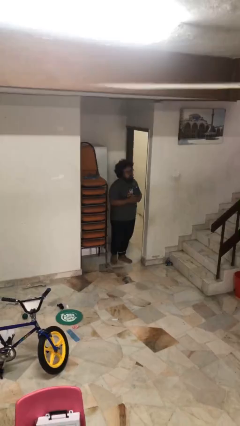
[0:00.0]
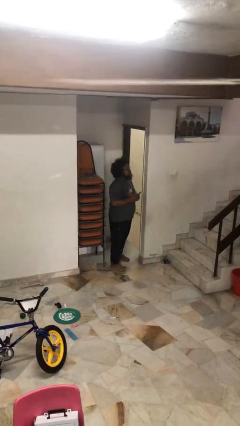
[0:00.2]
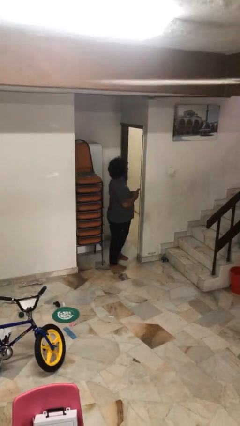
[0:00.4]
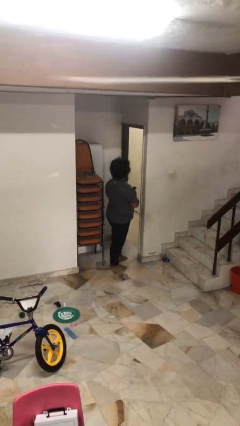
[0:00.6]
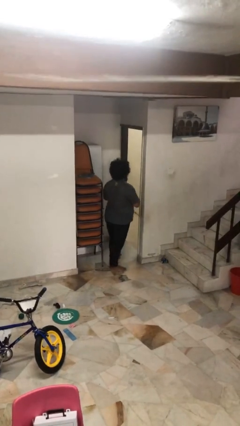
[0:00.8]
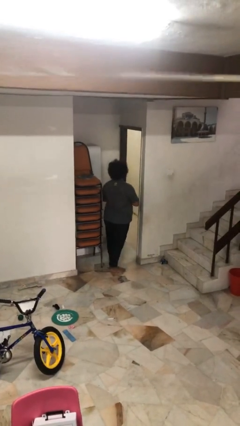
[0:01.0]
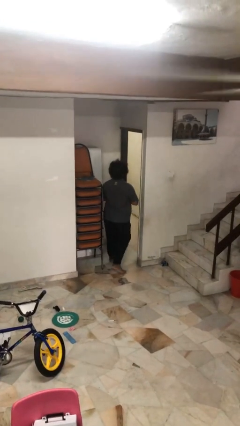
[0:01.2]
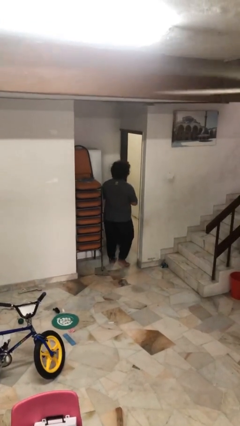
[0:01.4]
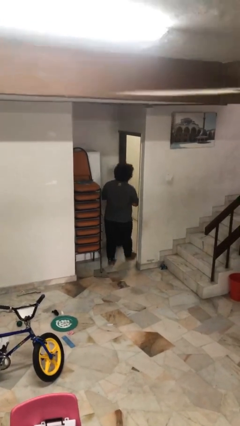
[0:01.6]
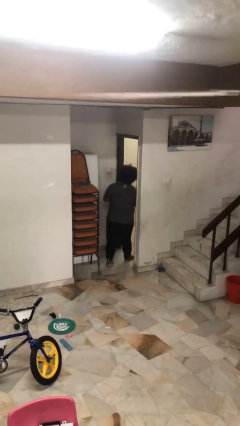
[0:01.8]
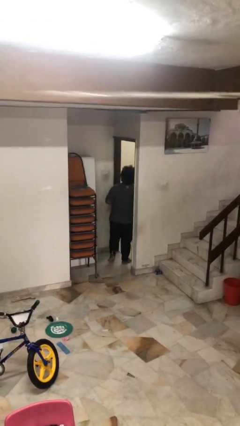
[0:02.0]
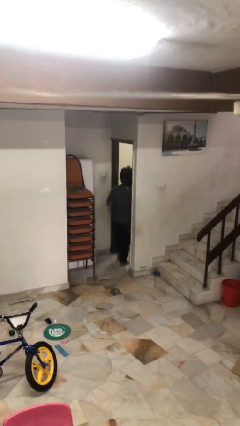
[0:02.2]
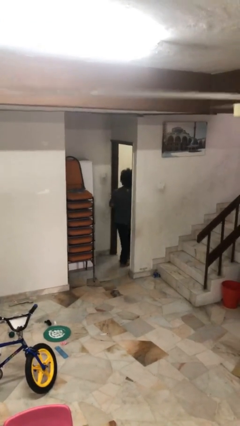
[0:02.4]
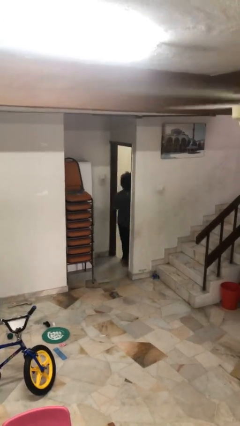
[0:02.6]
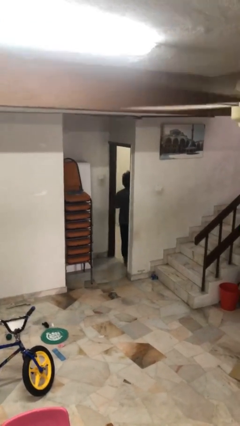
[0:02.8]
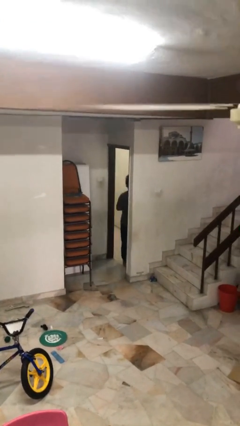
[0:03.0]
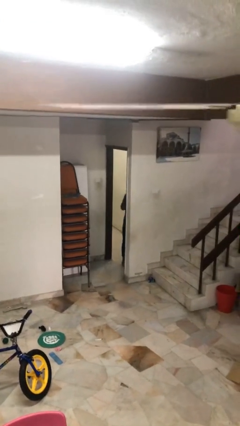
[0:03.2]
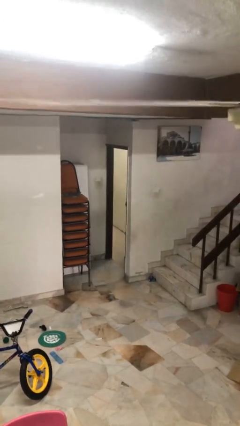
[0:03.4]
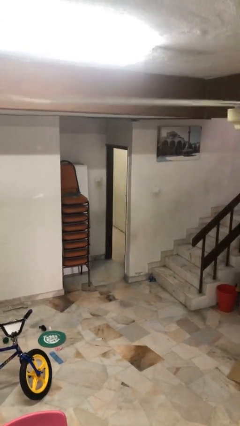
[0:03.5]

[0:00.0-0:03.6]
person exits scene through structure

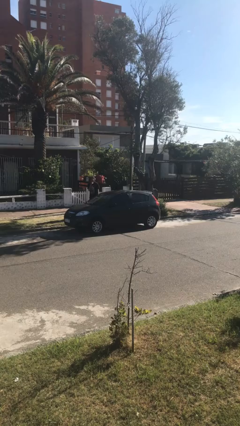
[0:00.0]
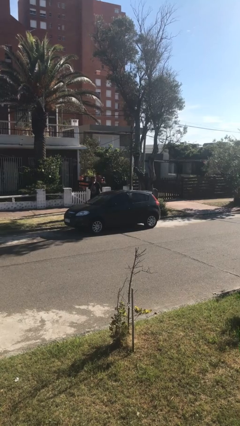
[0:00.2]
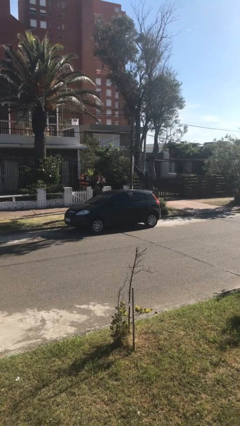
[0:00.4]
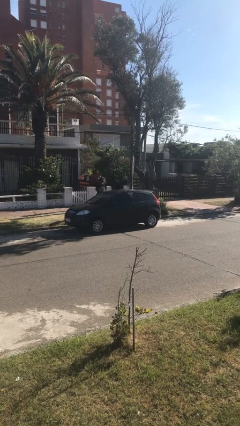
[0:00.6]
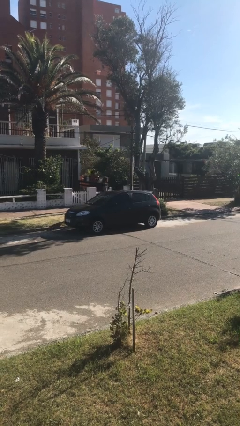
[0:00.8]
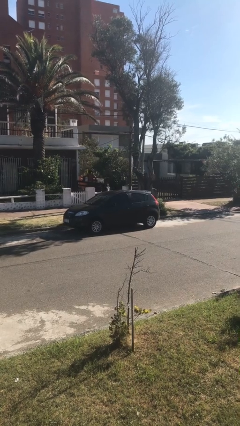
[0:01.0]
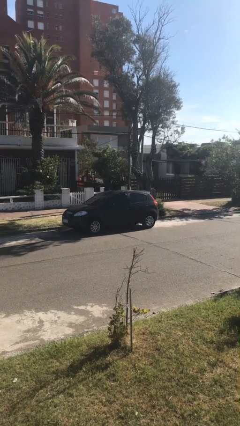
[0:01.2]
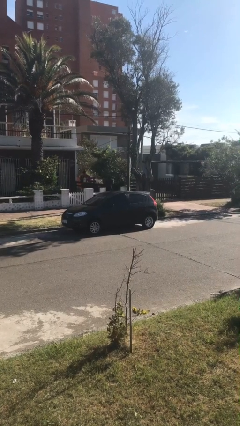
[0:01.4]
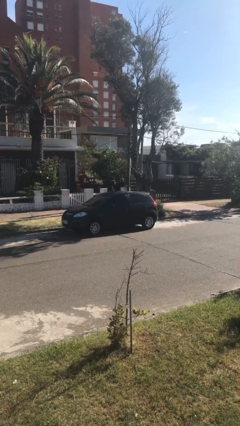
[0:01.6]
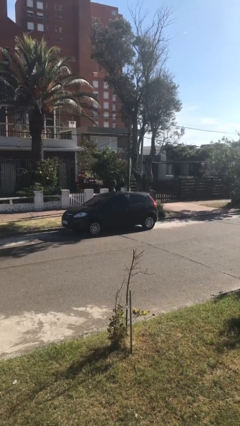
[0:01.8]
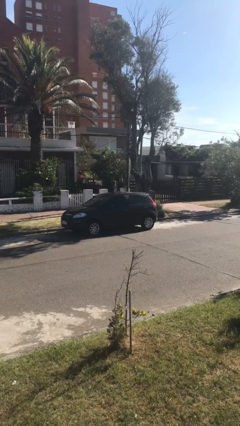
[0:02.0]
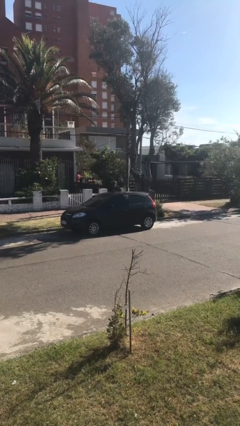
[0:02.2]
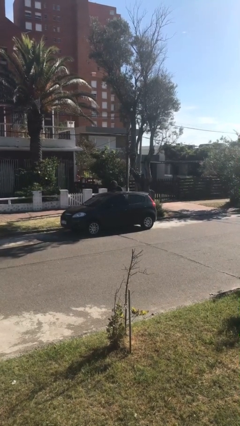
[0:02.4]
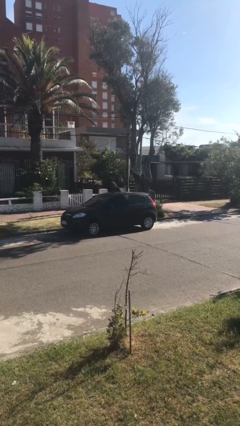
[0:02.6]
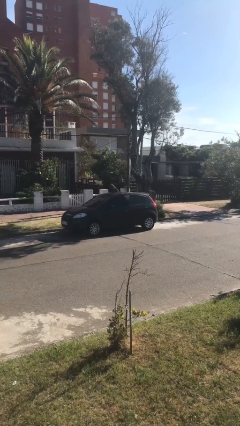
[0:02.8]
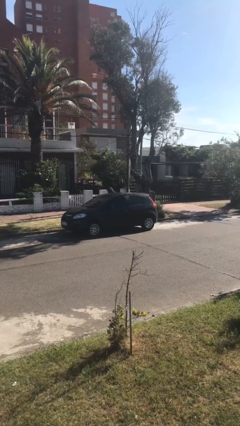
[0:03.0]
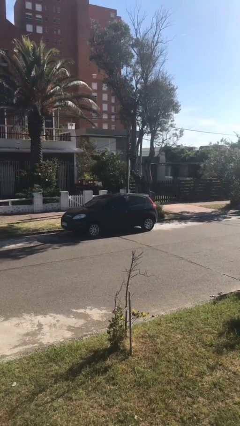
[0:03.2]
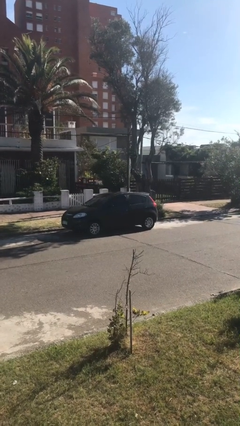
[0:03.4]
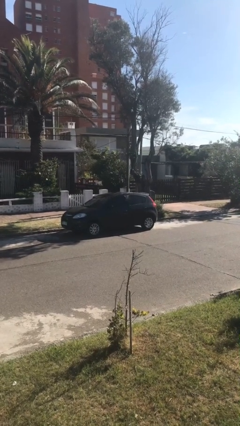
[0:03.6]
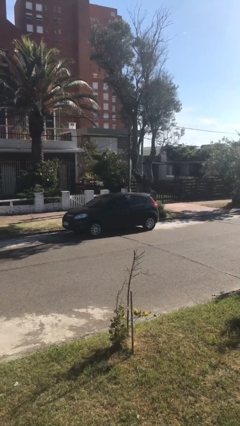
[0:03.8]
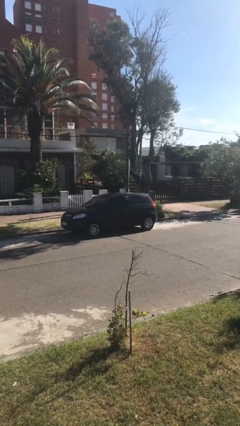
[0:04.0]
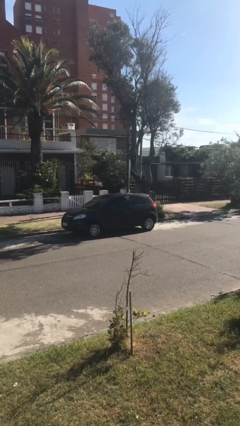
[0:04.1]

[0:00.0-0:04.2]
car picks up person

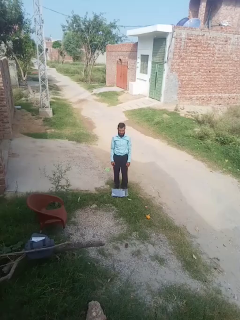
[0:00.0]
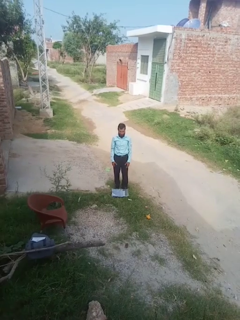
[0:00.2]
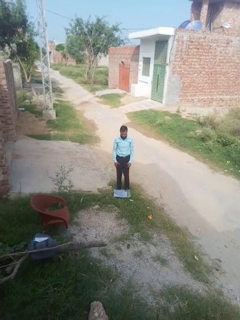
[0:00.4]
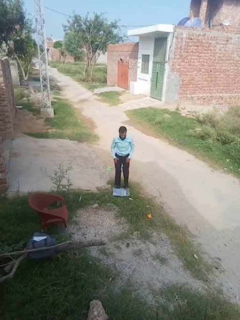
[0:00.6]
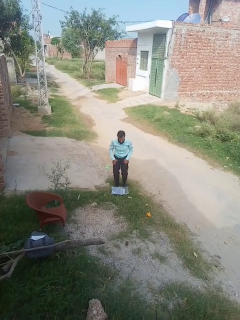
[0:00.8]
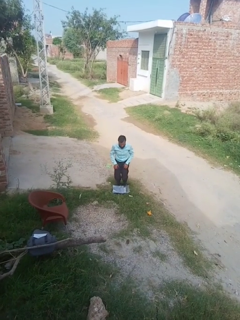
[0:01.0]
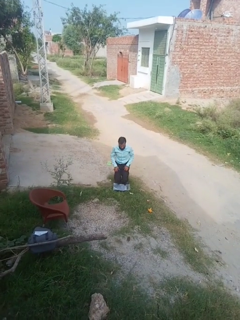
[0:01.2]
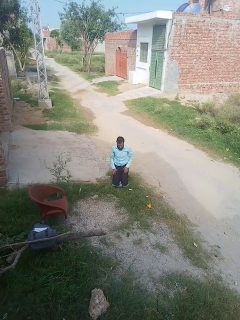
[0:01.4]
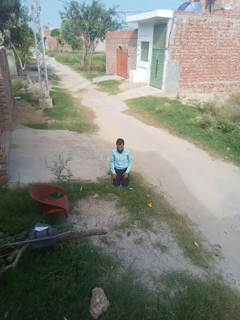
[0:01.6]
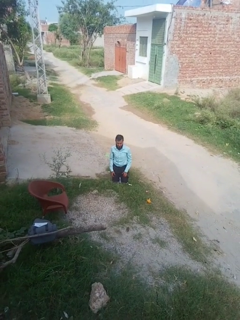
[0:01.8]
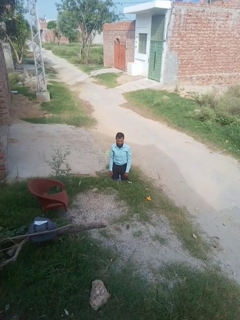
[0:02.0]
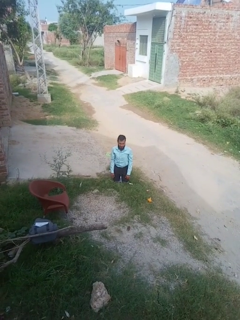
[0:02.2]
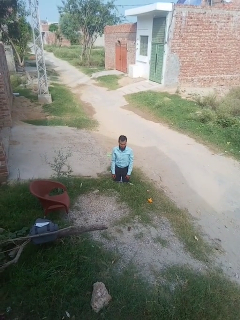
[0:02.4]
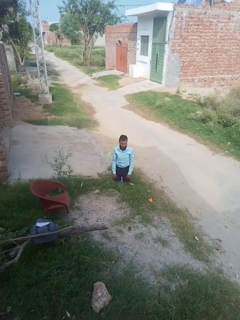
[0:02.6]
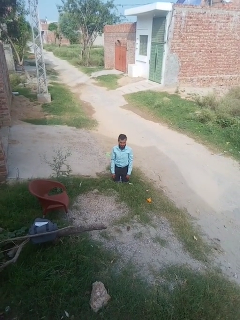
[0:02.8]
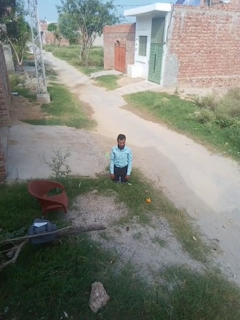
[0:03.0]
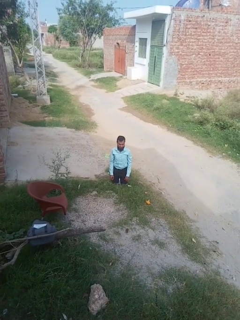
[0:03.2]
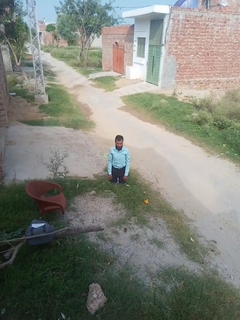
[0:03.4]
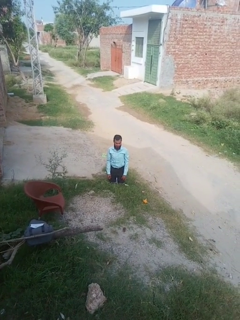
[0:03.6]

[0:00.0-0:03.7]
person kneels

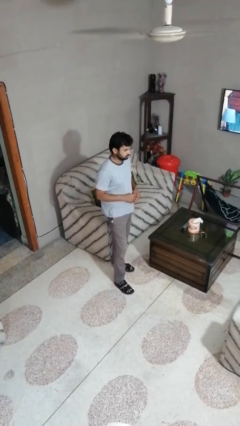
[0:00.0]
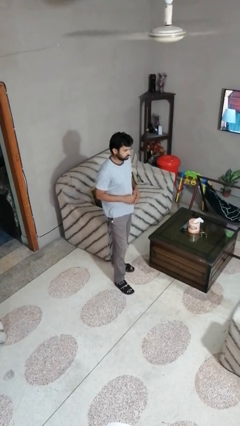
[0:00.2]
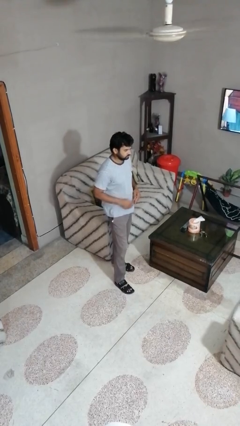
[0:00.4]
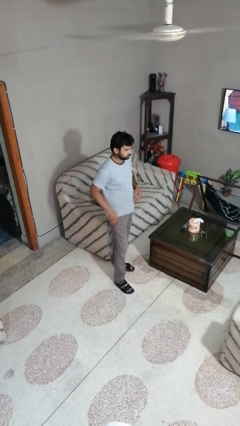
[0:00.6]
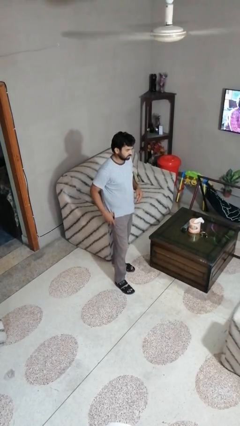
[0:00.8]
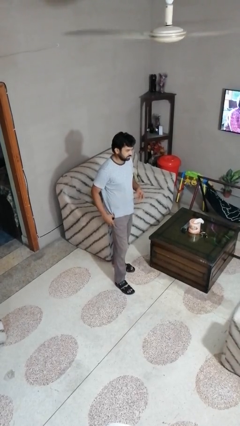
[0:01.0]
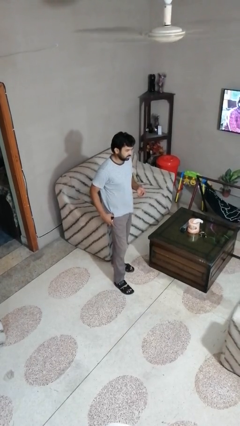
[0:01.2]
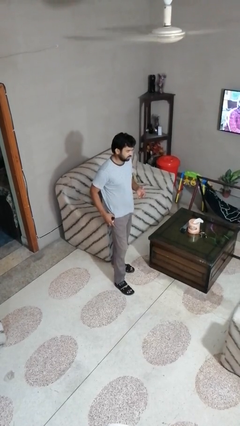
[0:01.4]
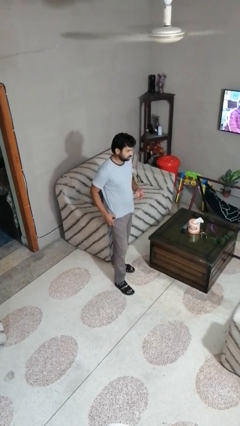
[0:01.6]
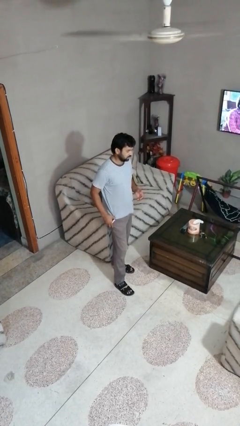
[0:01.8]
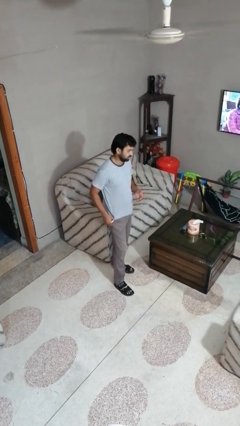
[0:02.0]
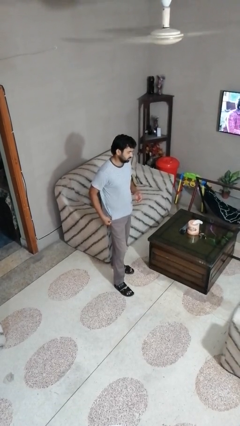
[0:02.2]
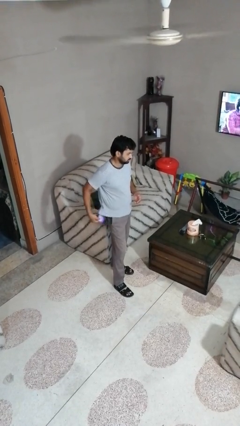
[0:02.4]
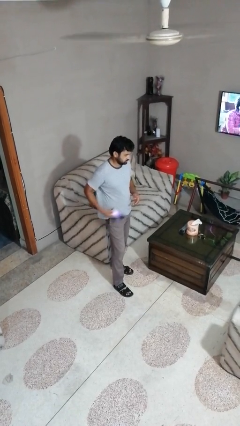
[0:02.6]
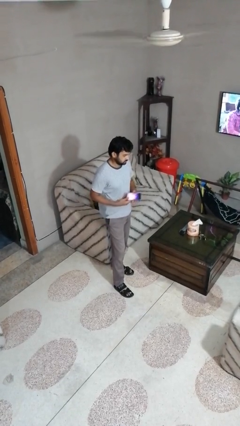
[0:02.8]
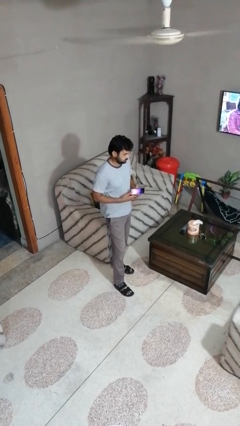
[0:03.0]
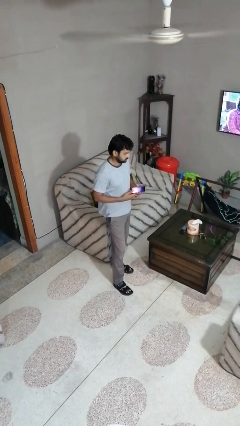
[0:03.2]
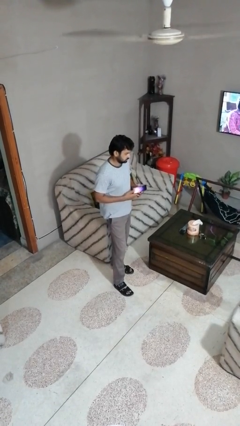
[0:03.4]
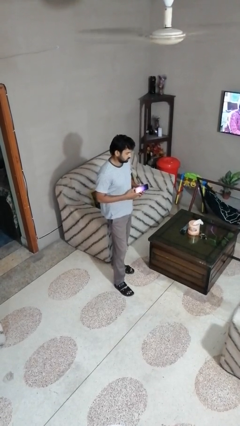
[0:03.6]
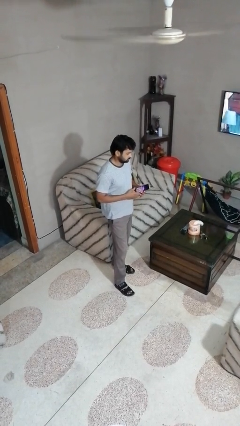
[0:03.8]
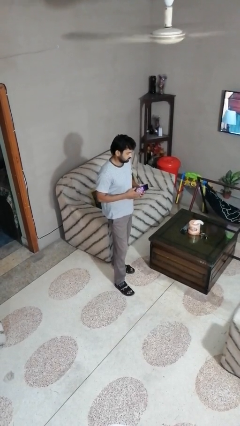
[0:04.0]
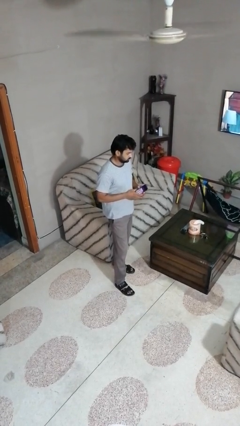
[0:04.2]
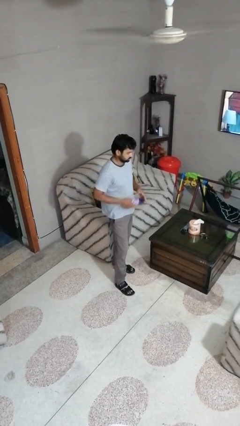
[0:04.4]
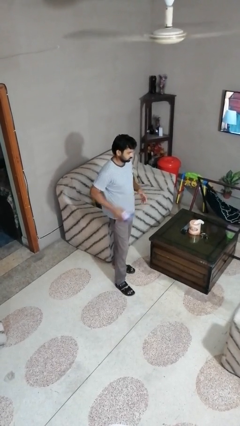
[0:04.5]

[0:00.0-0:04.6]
person takes phone from pocket

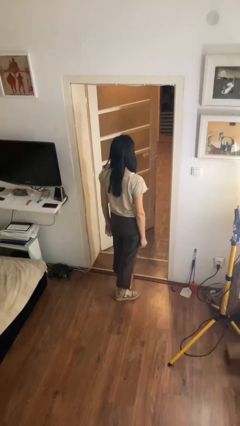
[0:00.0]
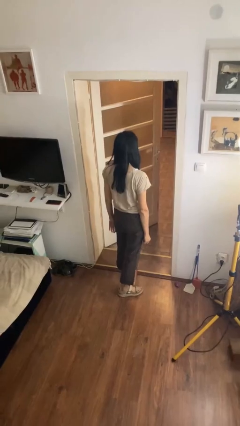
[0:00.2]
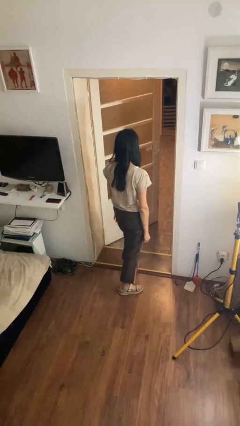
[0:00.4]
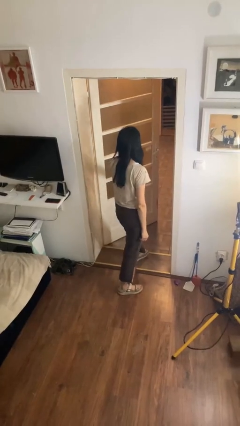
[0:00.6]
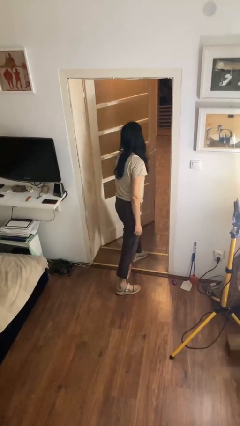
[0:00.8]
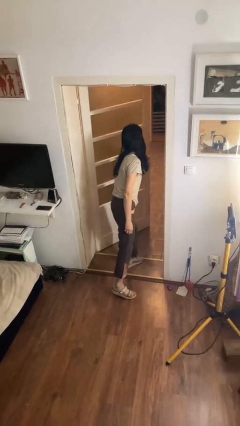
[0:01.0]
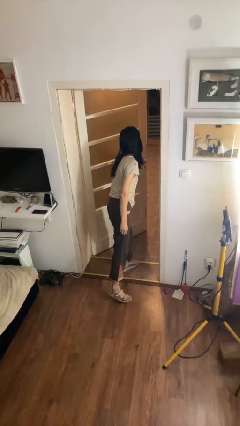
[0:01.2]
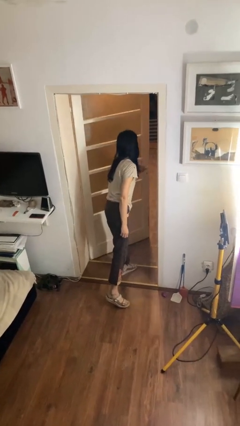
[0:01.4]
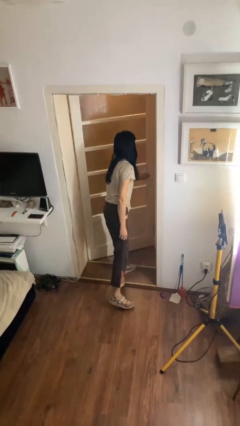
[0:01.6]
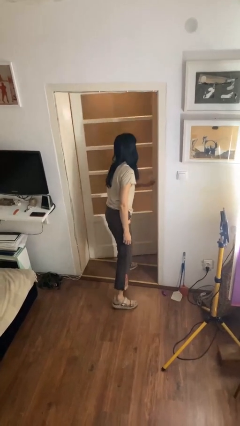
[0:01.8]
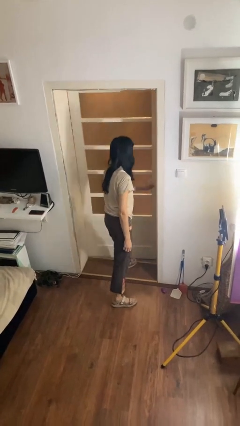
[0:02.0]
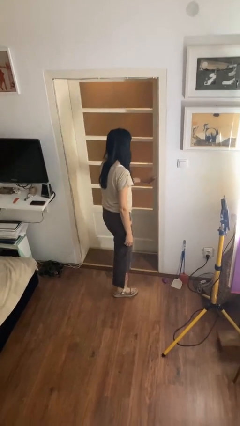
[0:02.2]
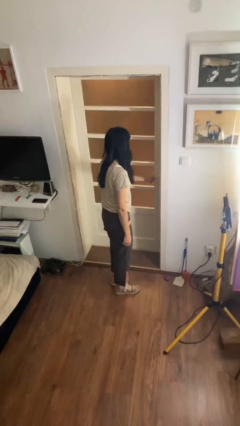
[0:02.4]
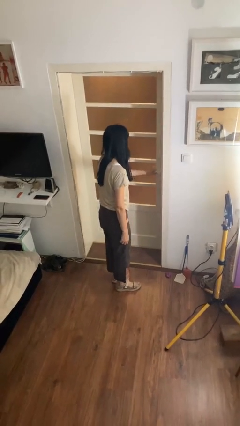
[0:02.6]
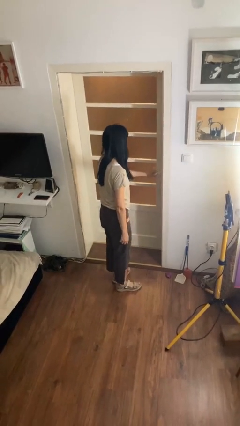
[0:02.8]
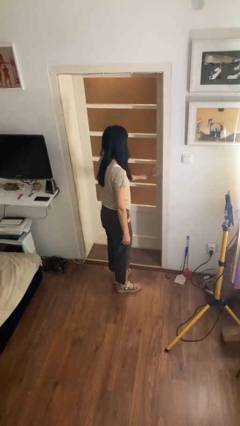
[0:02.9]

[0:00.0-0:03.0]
person closes facility door
